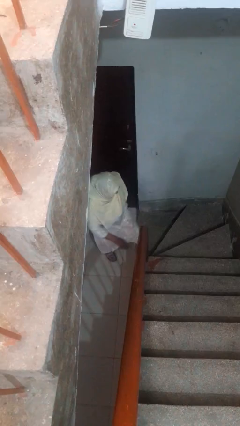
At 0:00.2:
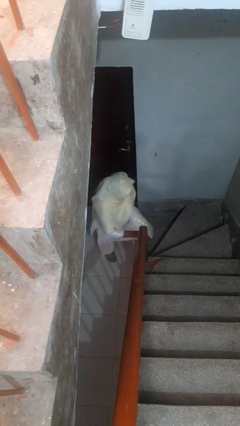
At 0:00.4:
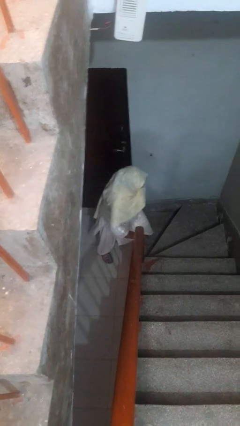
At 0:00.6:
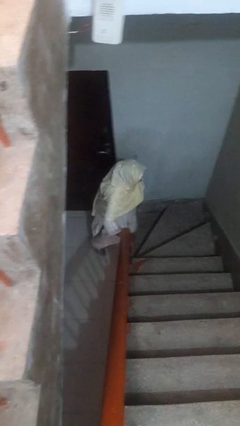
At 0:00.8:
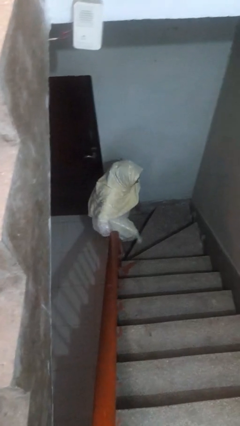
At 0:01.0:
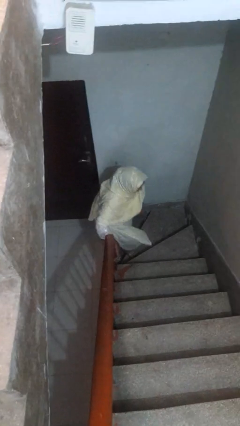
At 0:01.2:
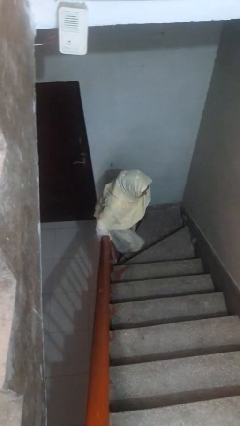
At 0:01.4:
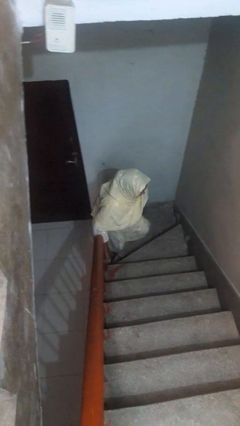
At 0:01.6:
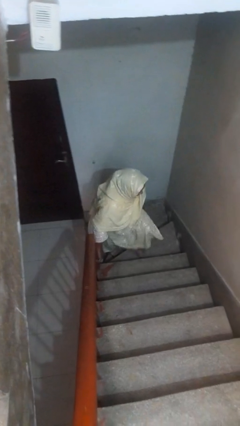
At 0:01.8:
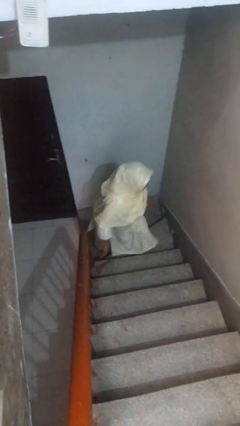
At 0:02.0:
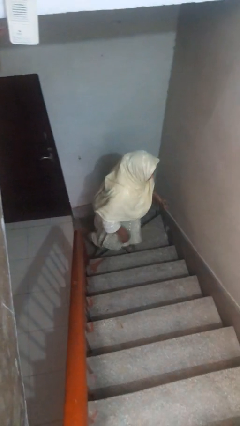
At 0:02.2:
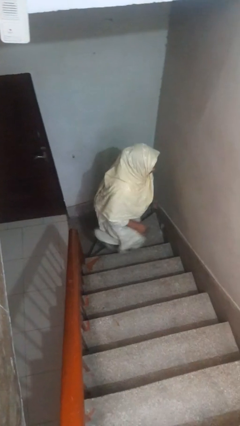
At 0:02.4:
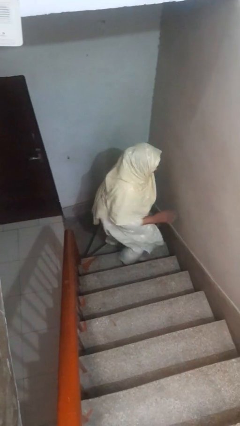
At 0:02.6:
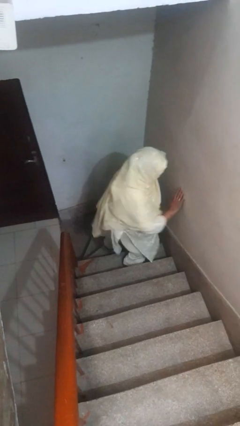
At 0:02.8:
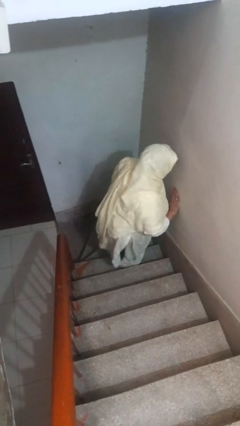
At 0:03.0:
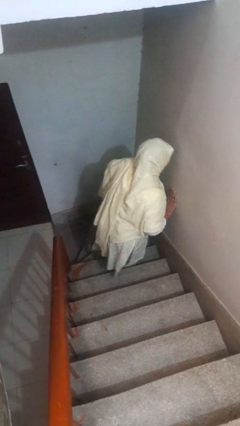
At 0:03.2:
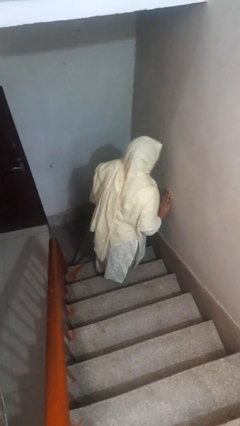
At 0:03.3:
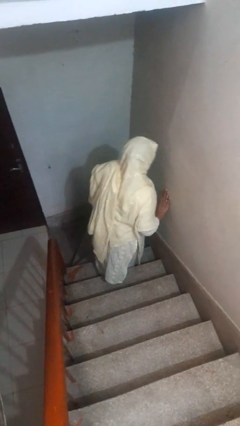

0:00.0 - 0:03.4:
person climbs up stairs

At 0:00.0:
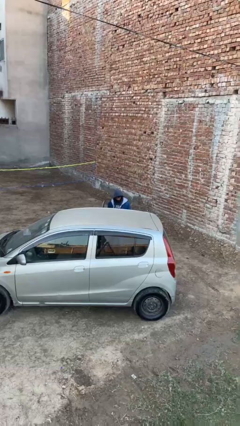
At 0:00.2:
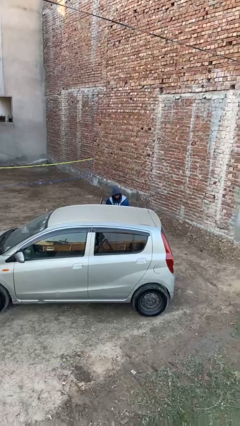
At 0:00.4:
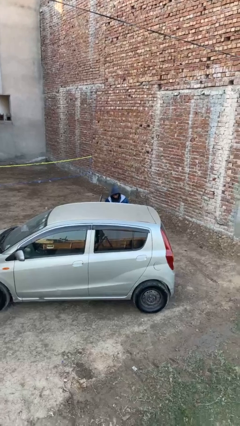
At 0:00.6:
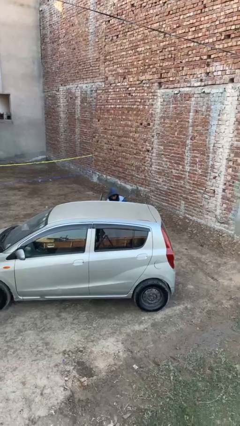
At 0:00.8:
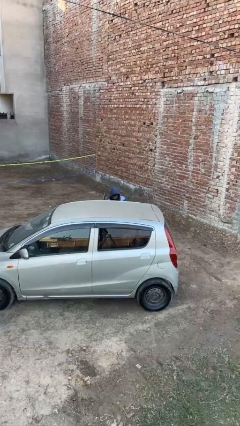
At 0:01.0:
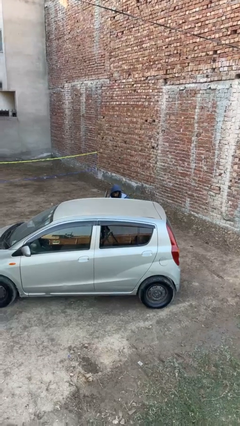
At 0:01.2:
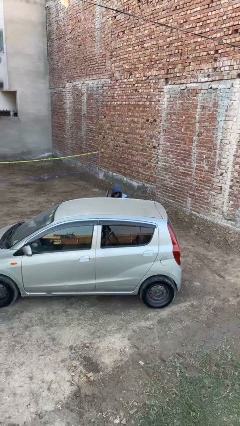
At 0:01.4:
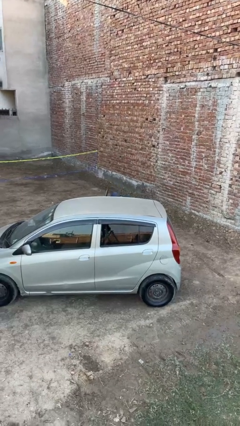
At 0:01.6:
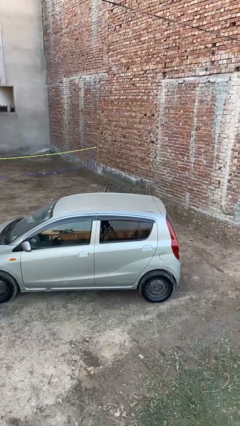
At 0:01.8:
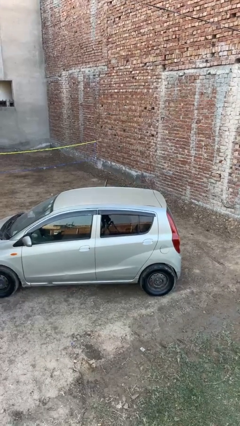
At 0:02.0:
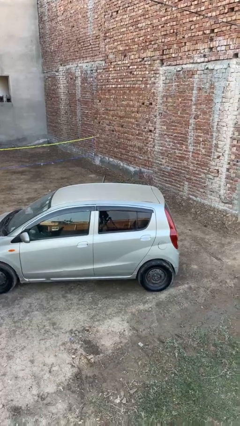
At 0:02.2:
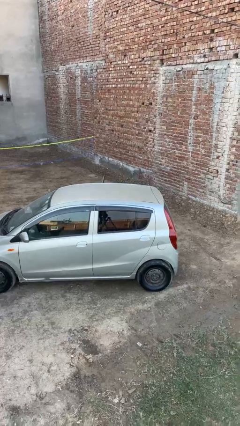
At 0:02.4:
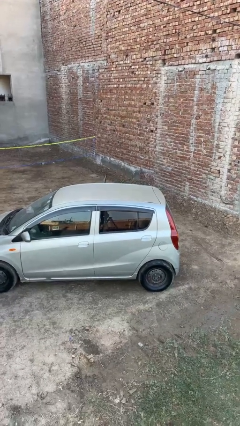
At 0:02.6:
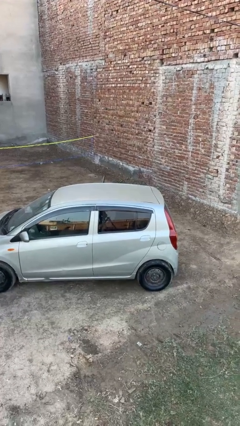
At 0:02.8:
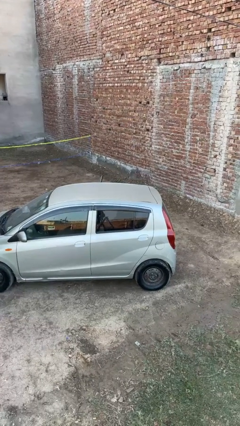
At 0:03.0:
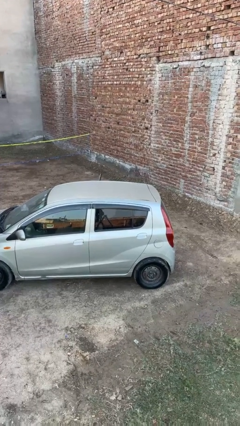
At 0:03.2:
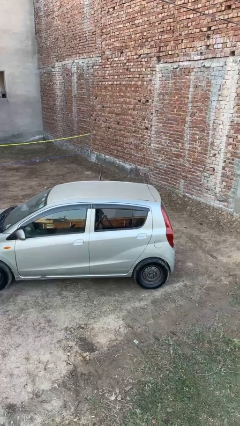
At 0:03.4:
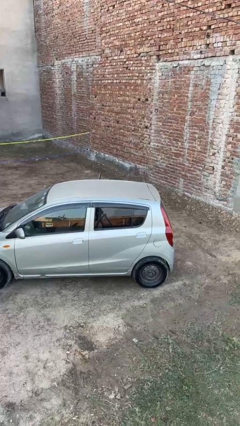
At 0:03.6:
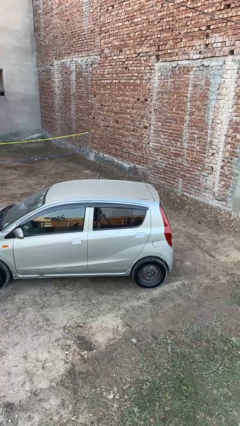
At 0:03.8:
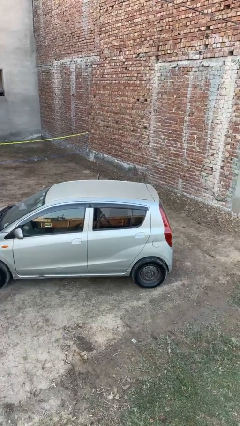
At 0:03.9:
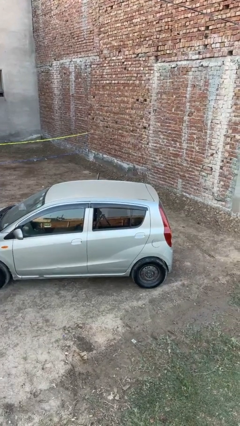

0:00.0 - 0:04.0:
person enters car

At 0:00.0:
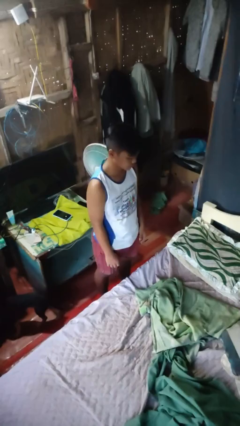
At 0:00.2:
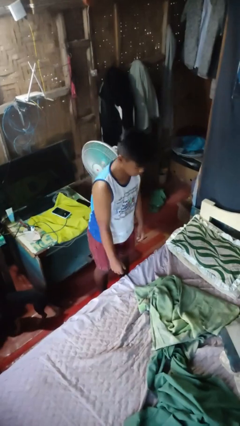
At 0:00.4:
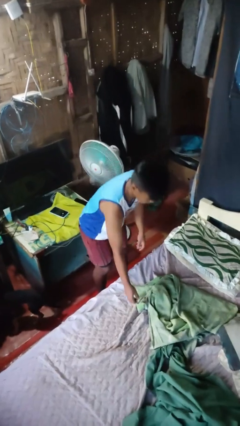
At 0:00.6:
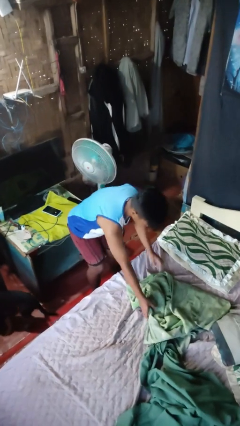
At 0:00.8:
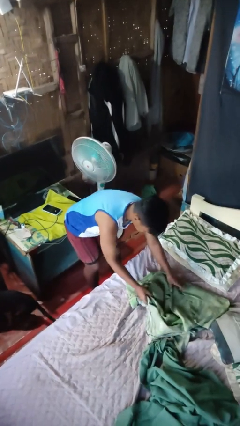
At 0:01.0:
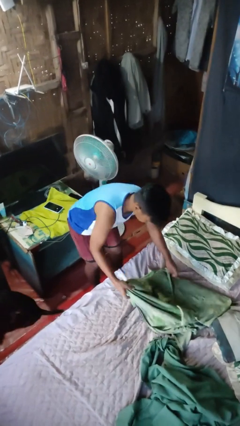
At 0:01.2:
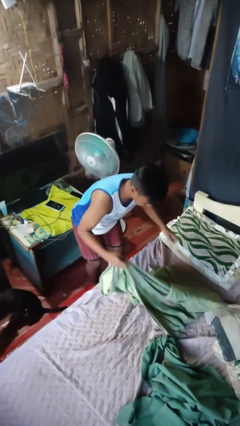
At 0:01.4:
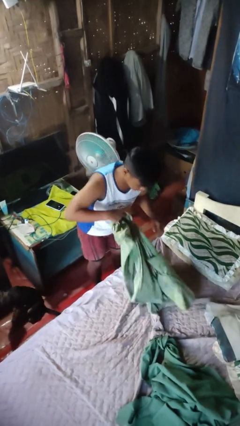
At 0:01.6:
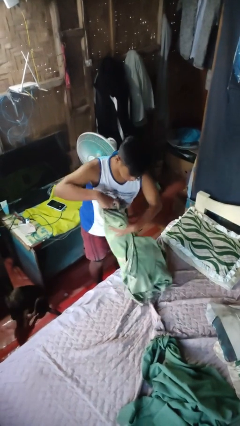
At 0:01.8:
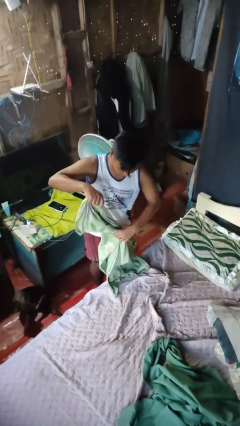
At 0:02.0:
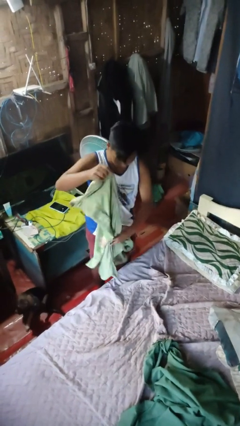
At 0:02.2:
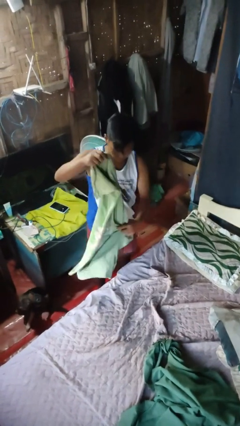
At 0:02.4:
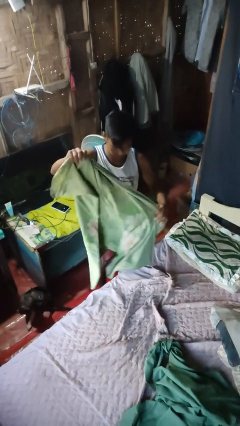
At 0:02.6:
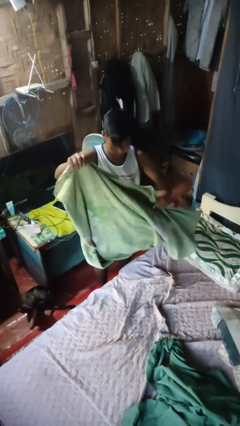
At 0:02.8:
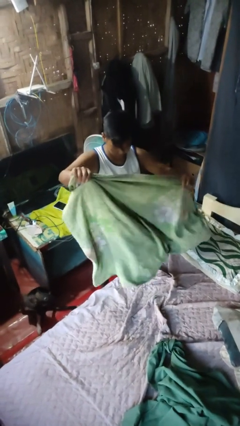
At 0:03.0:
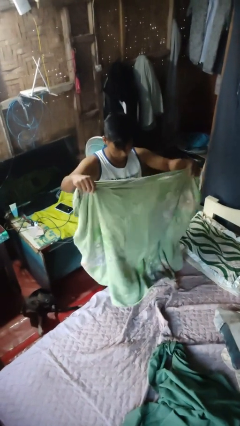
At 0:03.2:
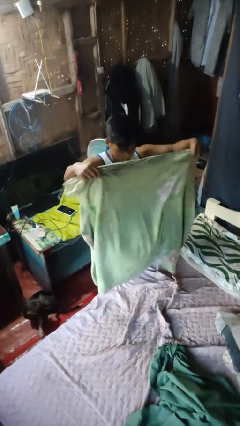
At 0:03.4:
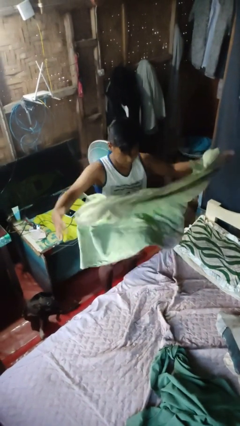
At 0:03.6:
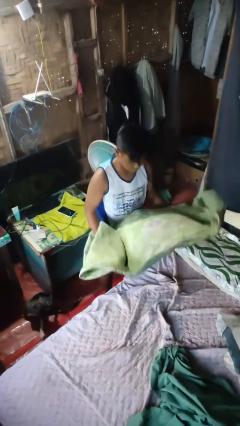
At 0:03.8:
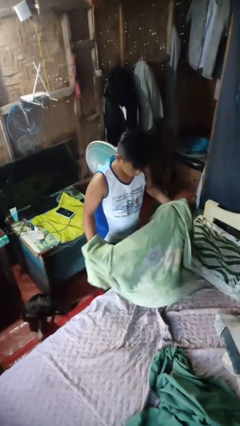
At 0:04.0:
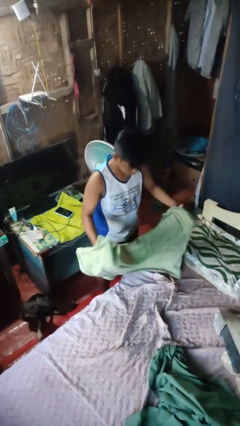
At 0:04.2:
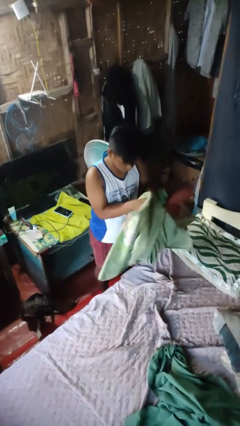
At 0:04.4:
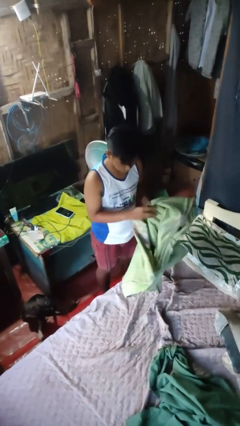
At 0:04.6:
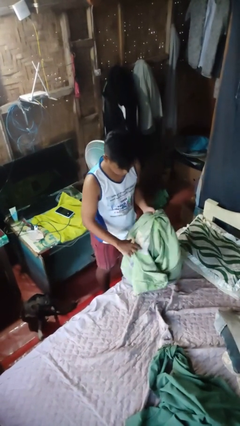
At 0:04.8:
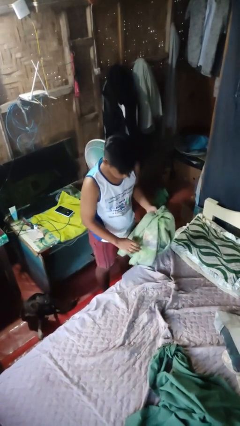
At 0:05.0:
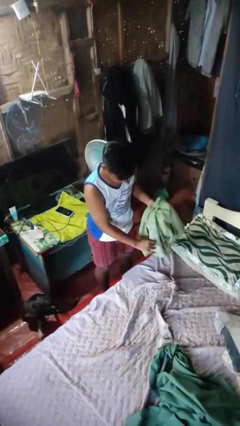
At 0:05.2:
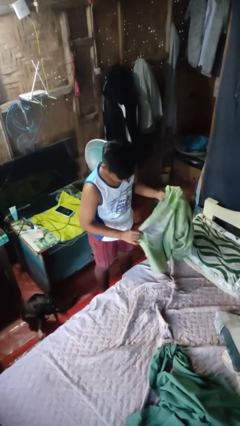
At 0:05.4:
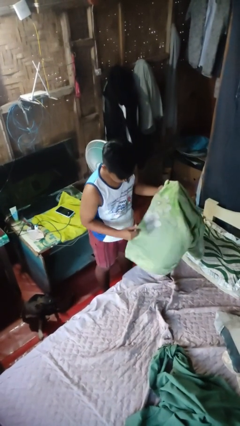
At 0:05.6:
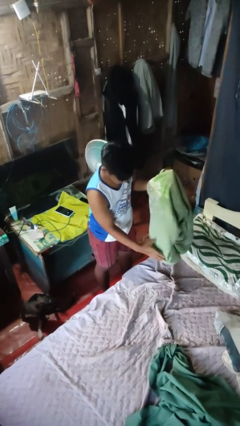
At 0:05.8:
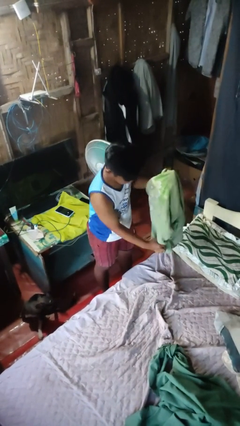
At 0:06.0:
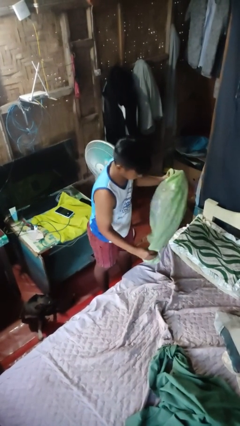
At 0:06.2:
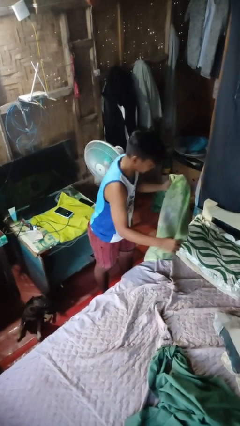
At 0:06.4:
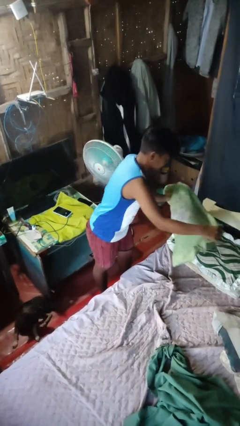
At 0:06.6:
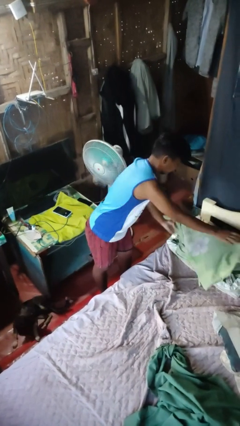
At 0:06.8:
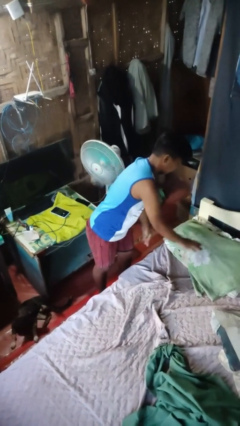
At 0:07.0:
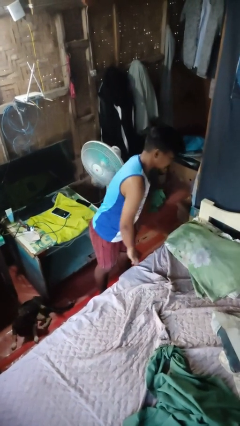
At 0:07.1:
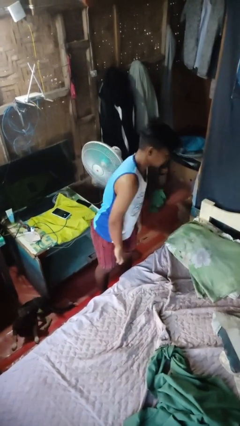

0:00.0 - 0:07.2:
person makes bed

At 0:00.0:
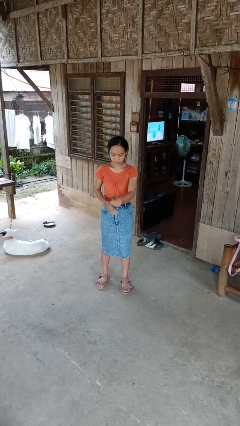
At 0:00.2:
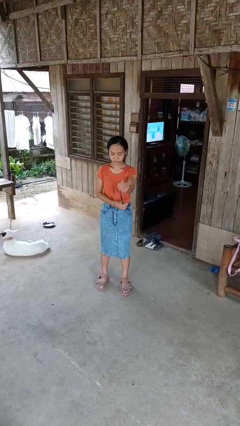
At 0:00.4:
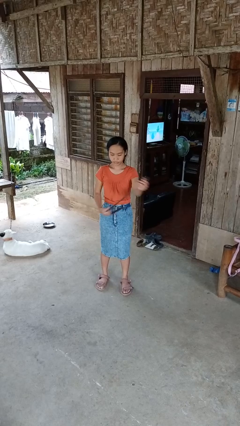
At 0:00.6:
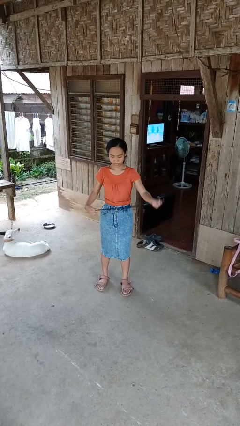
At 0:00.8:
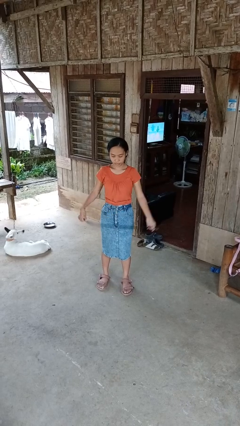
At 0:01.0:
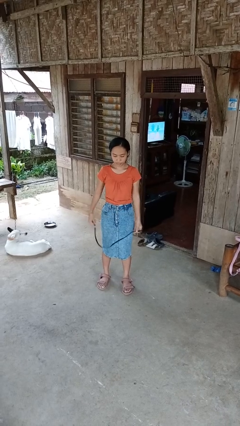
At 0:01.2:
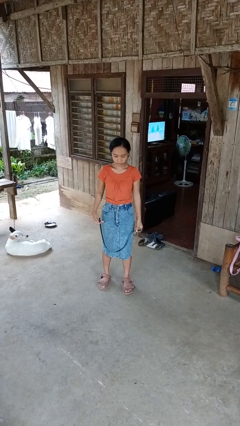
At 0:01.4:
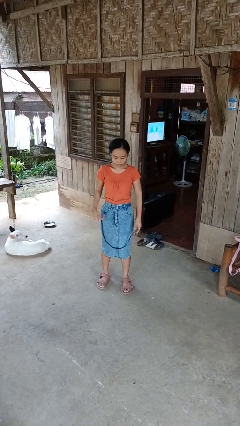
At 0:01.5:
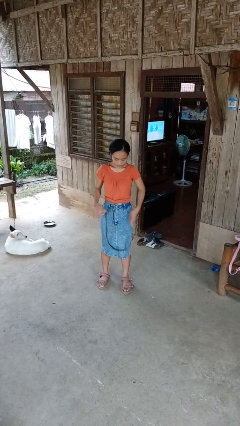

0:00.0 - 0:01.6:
person takes off belt

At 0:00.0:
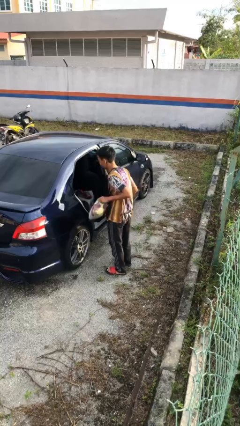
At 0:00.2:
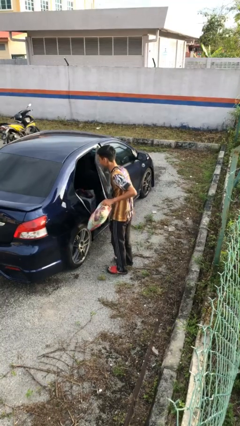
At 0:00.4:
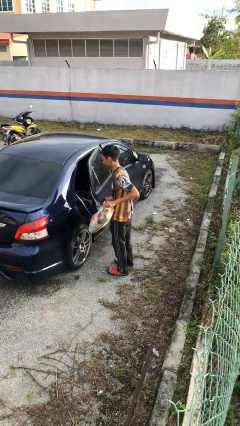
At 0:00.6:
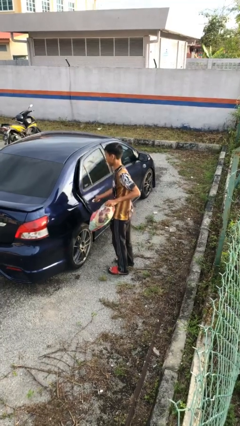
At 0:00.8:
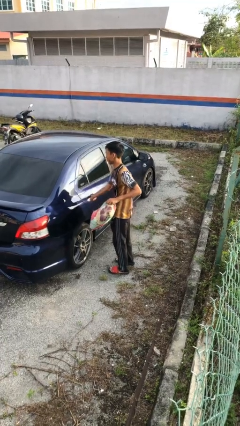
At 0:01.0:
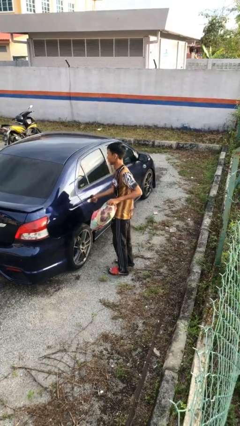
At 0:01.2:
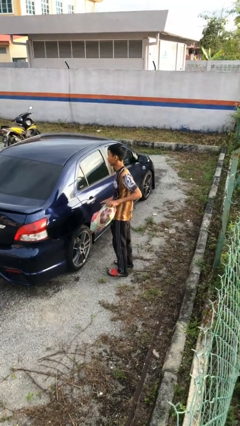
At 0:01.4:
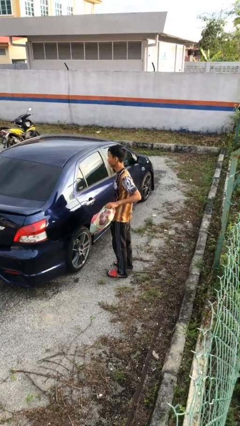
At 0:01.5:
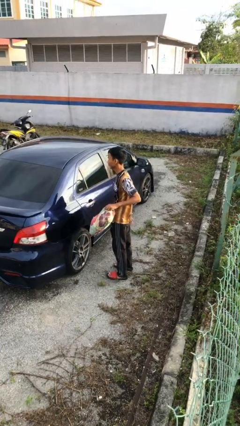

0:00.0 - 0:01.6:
person closes car door
